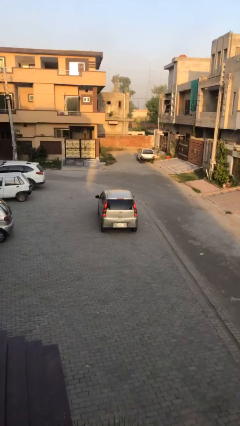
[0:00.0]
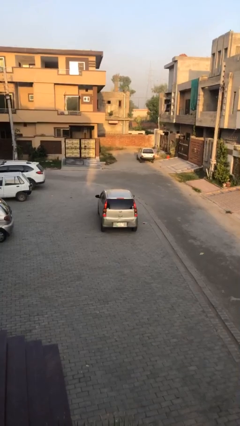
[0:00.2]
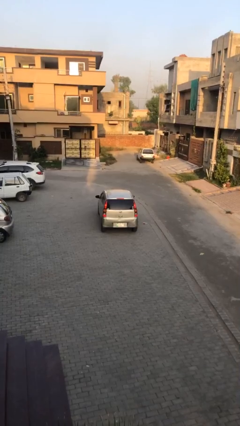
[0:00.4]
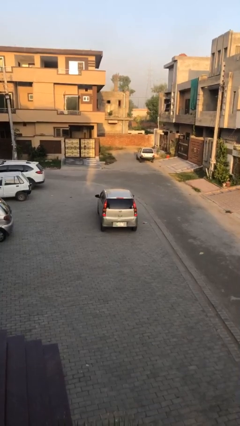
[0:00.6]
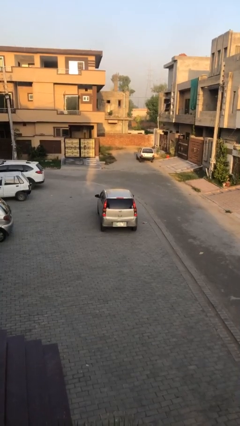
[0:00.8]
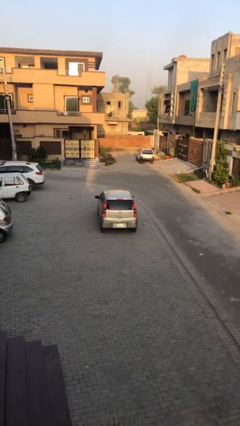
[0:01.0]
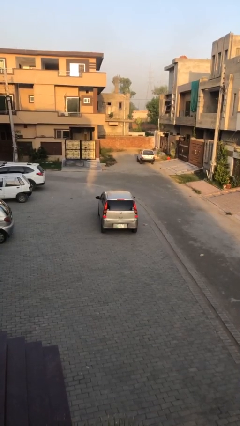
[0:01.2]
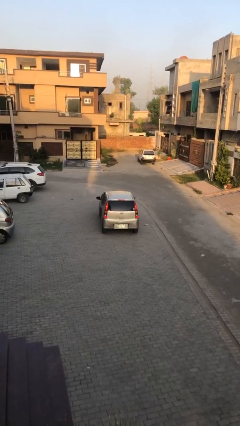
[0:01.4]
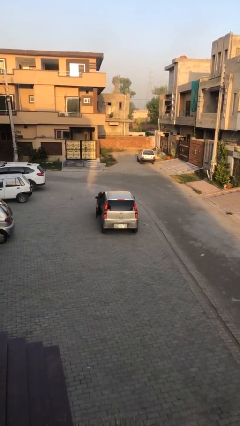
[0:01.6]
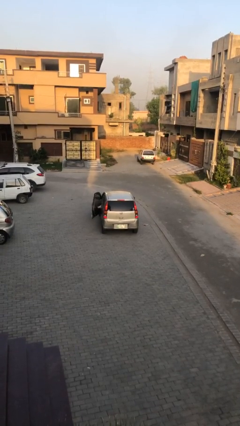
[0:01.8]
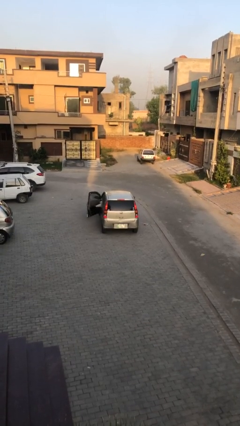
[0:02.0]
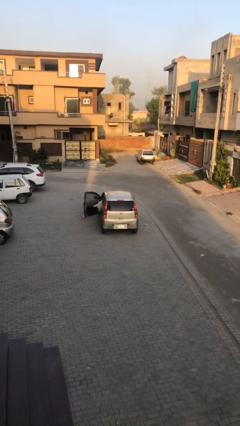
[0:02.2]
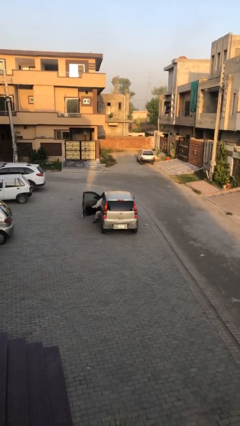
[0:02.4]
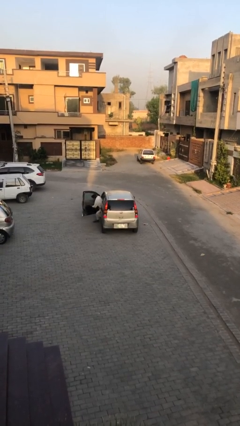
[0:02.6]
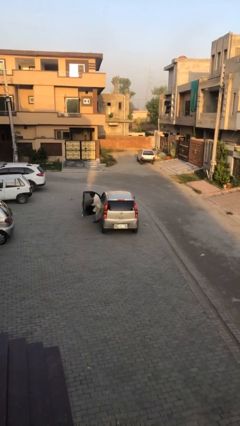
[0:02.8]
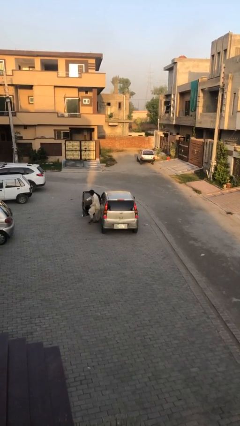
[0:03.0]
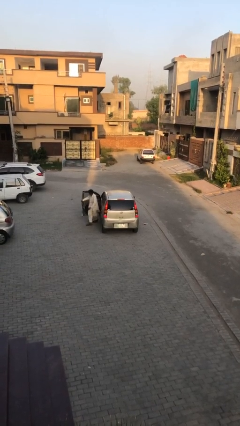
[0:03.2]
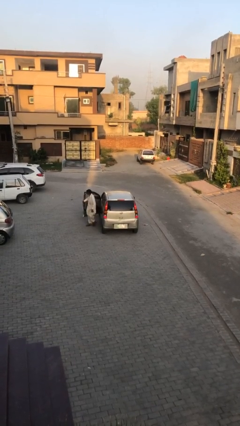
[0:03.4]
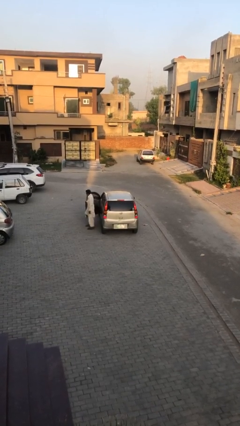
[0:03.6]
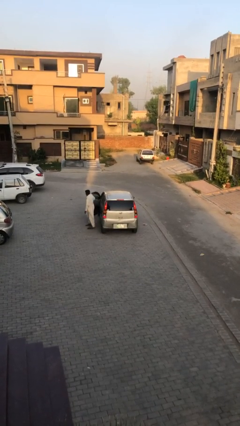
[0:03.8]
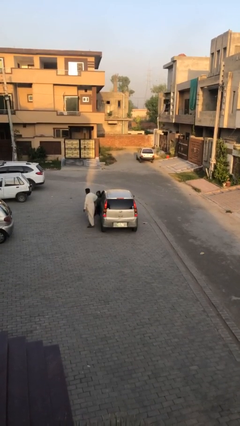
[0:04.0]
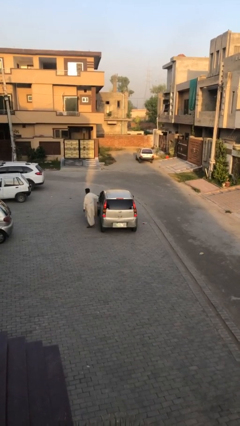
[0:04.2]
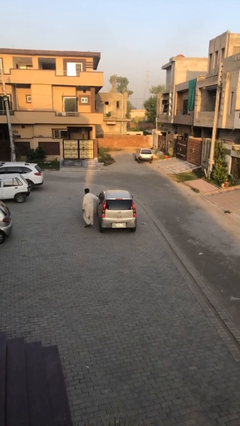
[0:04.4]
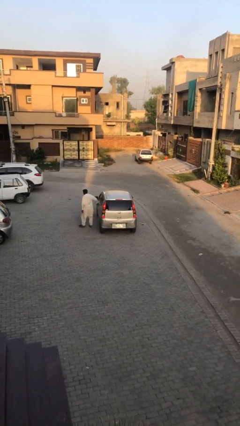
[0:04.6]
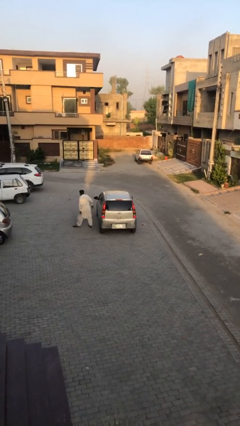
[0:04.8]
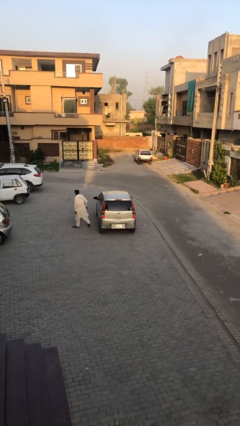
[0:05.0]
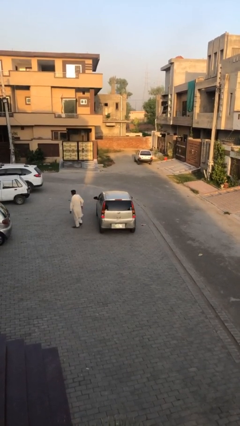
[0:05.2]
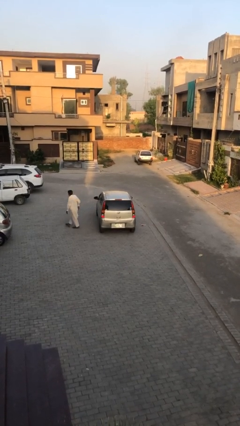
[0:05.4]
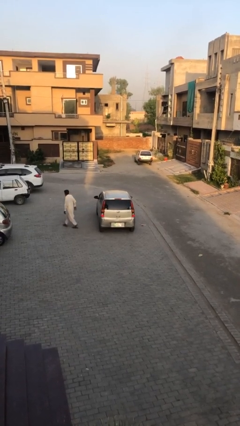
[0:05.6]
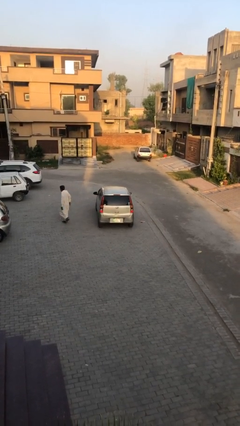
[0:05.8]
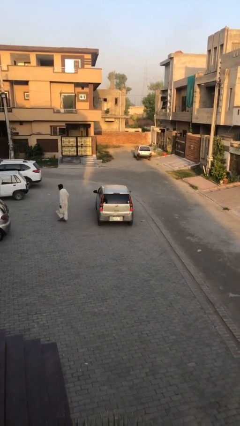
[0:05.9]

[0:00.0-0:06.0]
car drops off person

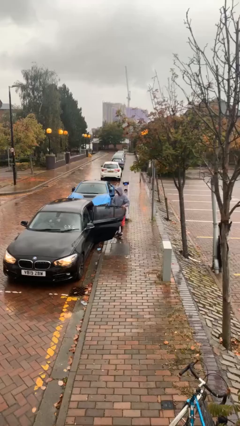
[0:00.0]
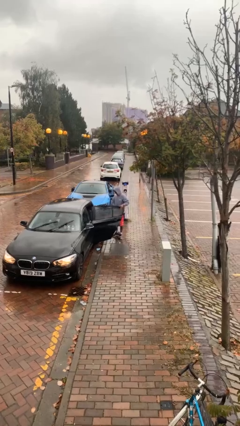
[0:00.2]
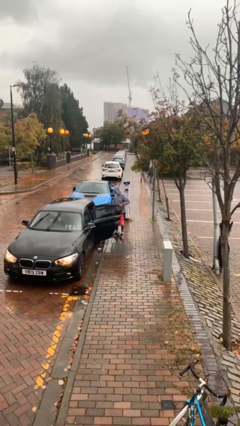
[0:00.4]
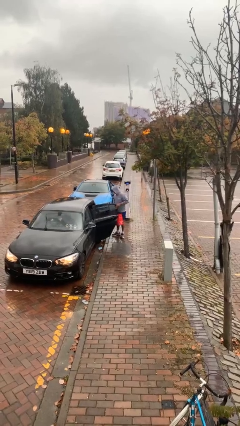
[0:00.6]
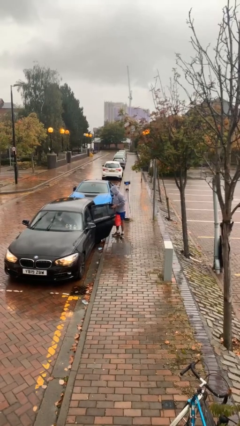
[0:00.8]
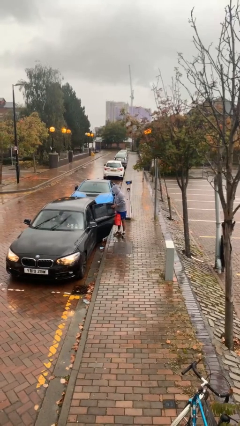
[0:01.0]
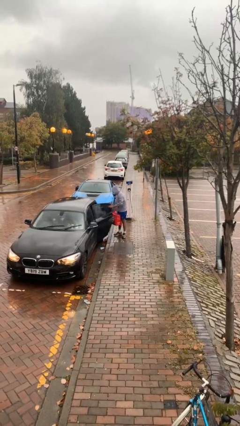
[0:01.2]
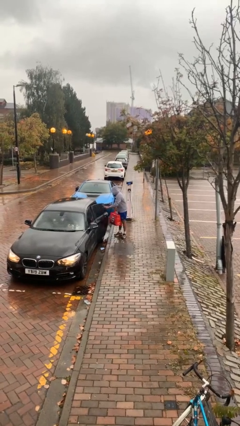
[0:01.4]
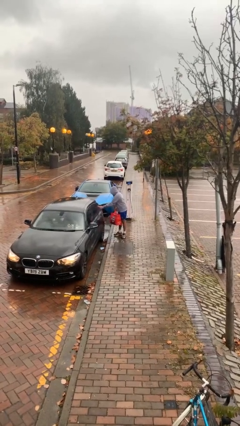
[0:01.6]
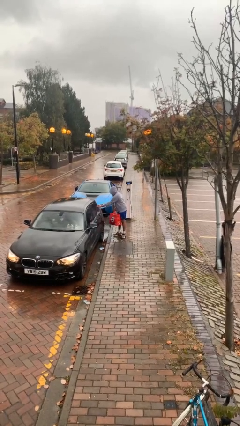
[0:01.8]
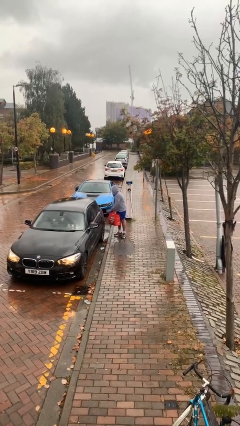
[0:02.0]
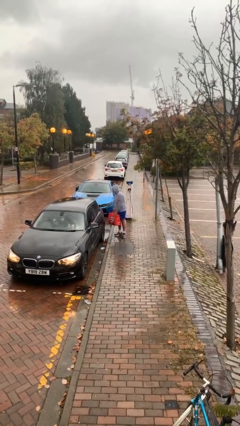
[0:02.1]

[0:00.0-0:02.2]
person closes car door

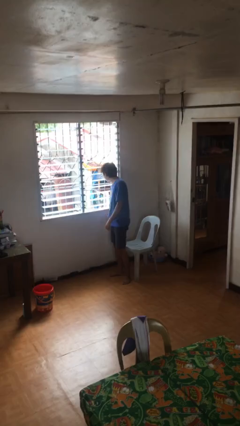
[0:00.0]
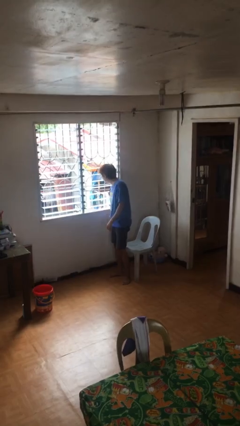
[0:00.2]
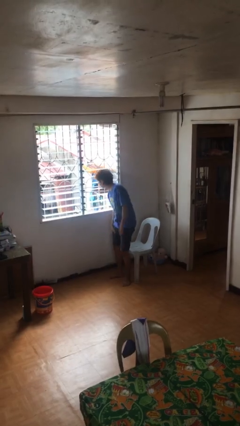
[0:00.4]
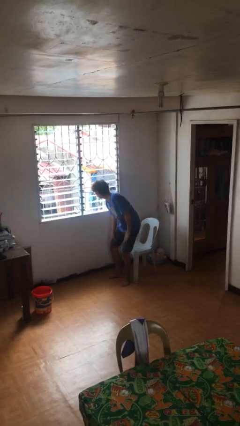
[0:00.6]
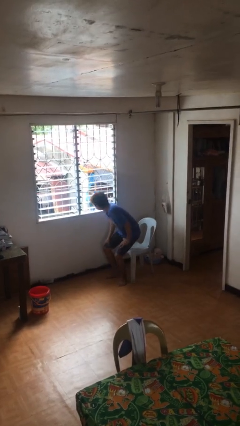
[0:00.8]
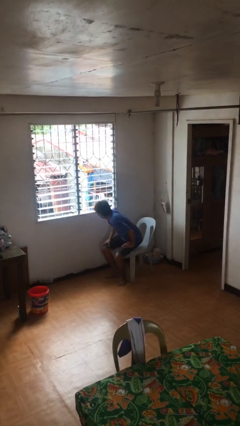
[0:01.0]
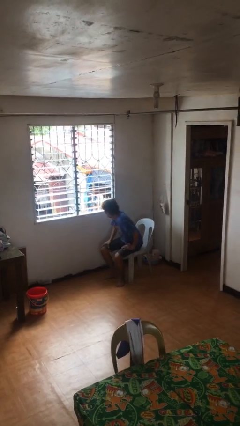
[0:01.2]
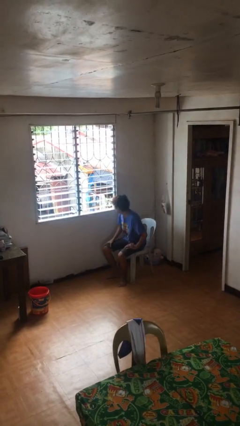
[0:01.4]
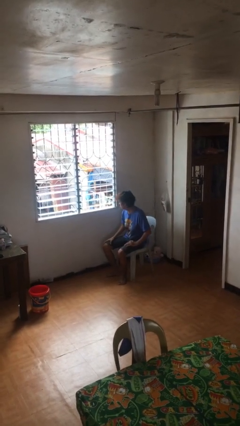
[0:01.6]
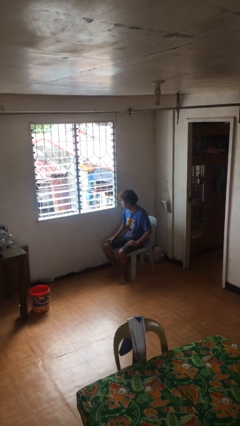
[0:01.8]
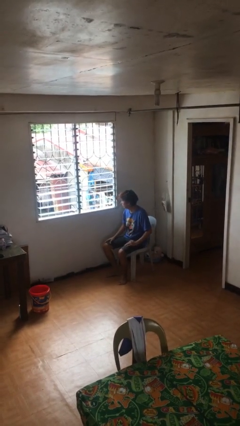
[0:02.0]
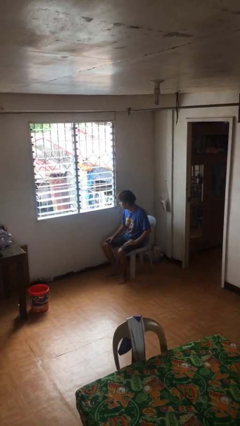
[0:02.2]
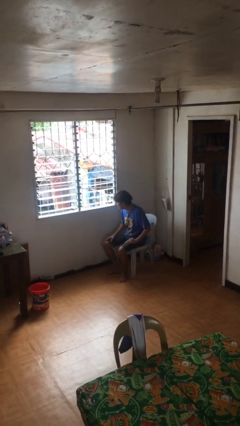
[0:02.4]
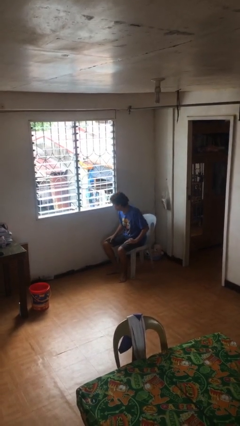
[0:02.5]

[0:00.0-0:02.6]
person sits down

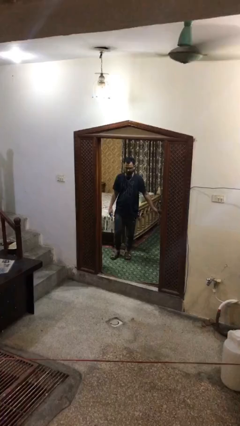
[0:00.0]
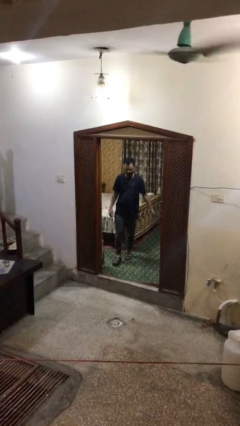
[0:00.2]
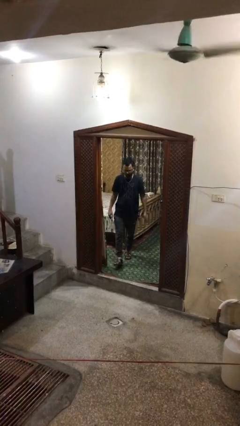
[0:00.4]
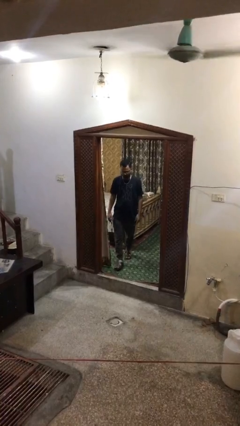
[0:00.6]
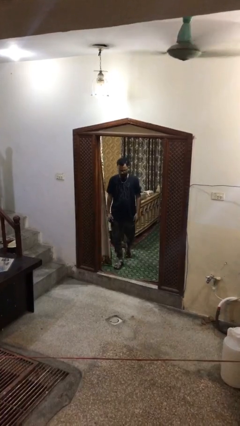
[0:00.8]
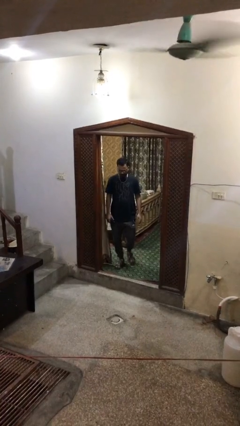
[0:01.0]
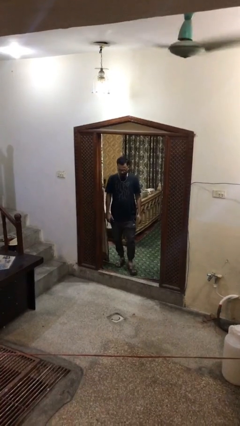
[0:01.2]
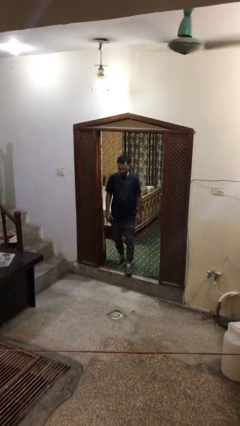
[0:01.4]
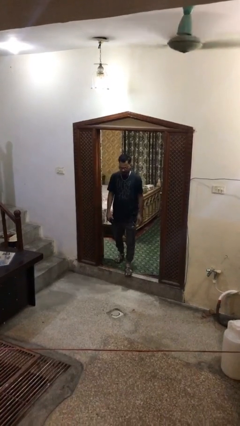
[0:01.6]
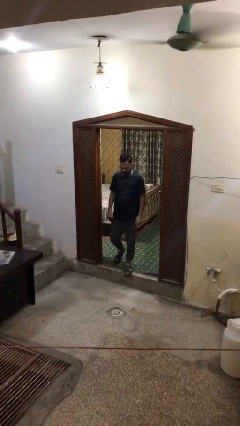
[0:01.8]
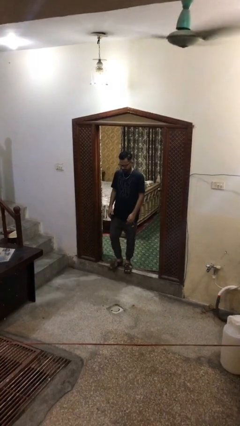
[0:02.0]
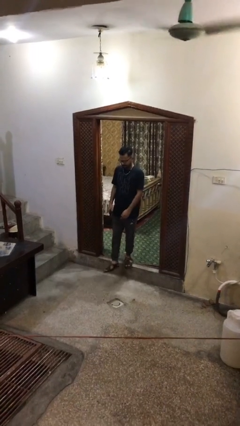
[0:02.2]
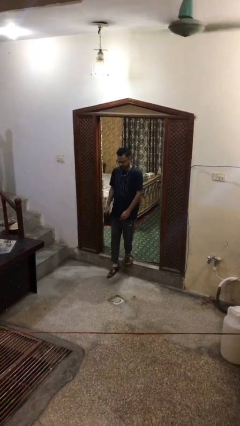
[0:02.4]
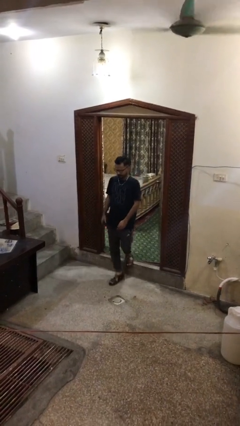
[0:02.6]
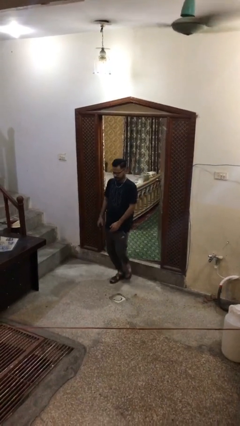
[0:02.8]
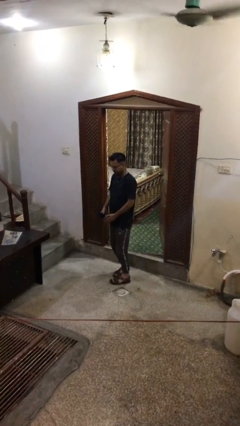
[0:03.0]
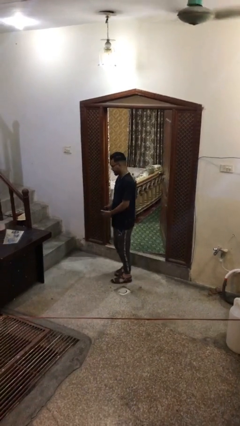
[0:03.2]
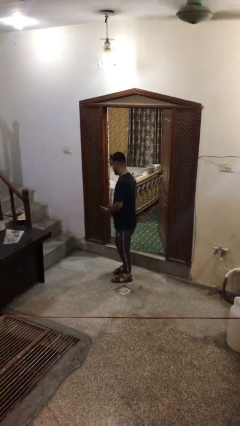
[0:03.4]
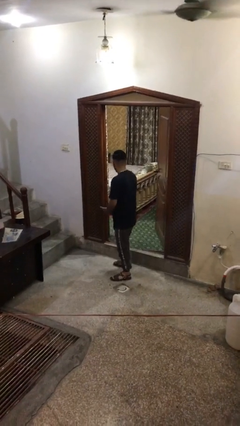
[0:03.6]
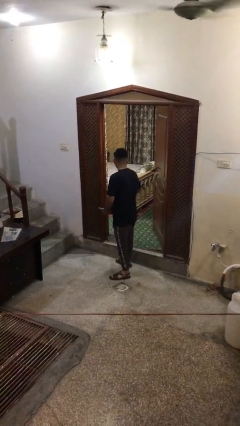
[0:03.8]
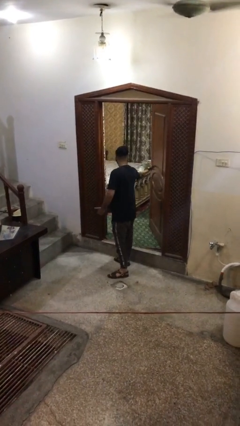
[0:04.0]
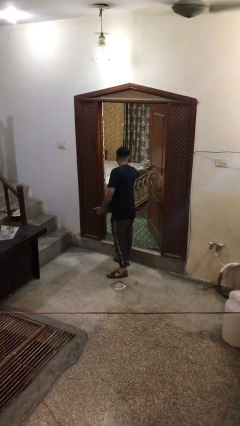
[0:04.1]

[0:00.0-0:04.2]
person enters scene through structure

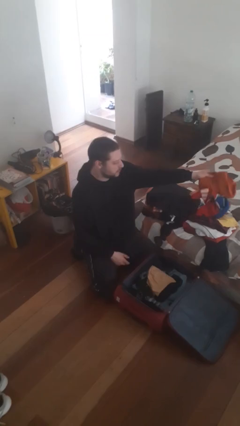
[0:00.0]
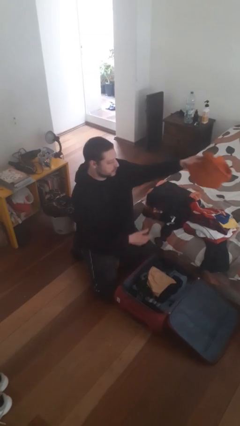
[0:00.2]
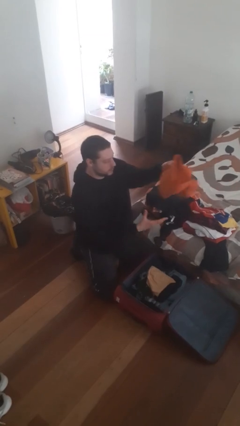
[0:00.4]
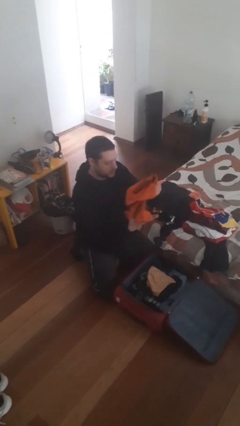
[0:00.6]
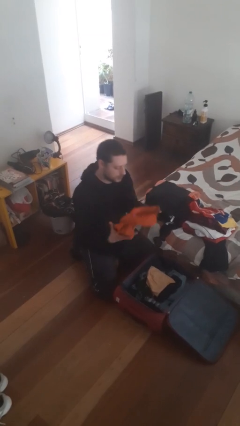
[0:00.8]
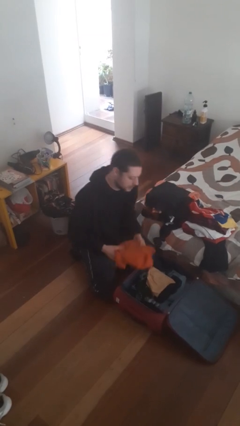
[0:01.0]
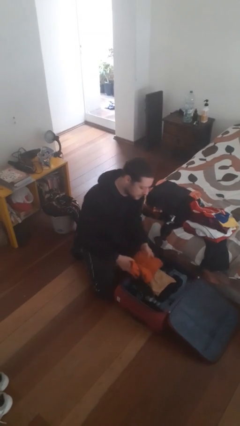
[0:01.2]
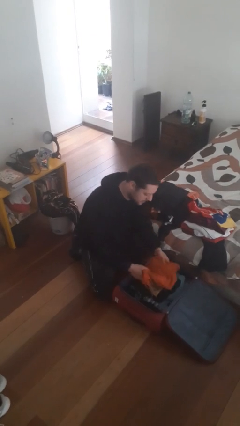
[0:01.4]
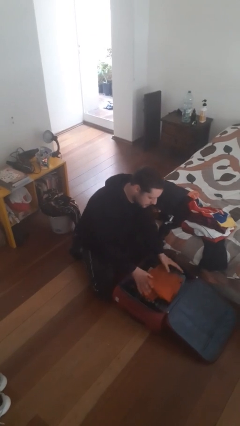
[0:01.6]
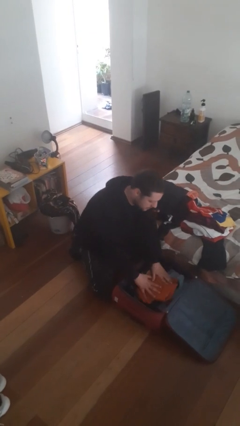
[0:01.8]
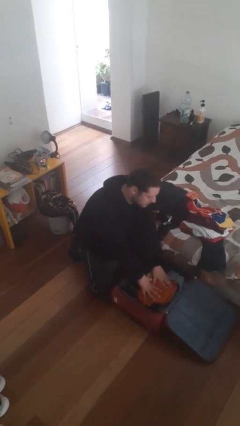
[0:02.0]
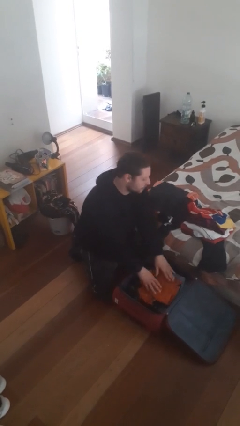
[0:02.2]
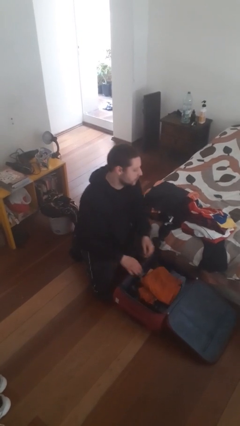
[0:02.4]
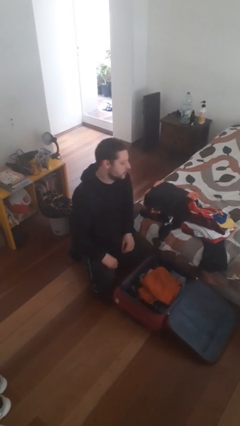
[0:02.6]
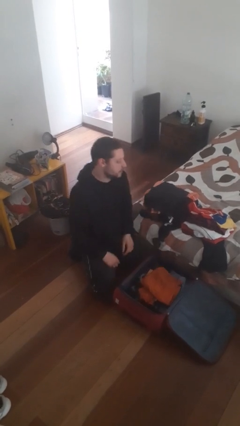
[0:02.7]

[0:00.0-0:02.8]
person loads clothes into suitcase

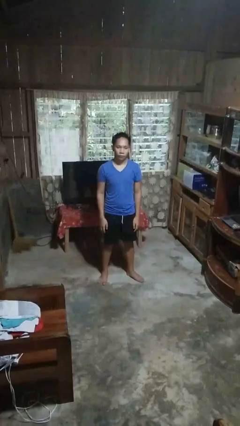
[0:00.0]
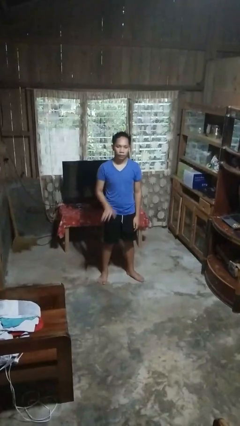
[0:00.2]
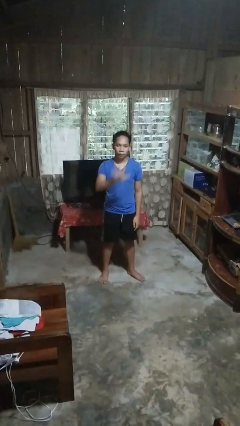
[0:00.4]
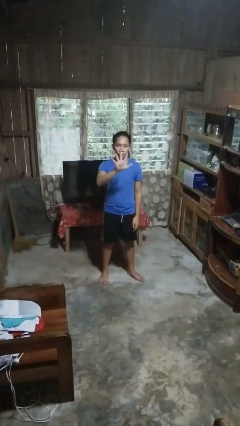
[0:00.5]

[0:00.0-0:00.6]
person gestures number five
